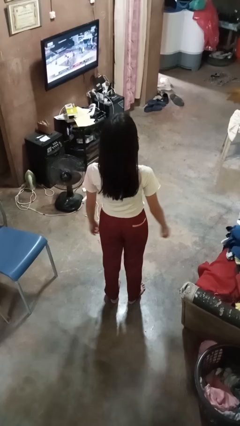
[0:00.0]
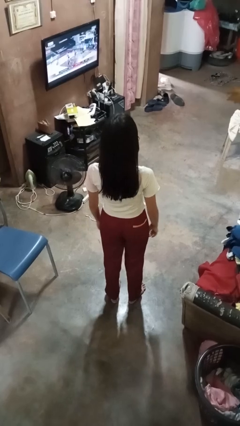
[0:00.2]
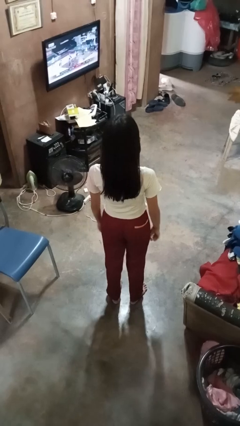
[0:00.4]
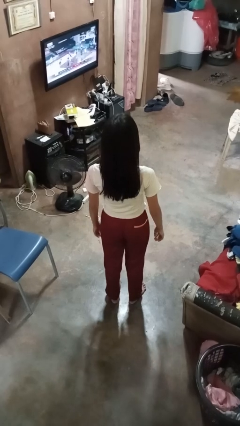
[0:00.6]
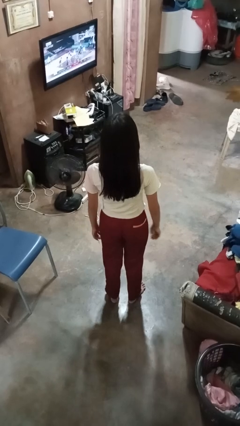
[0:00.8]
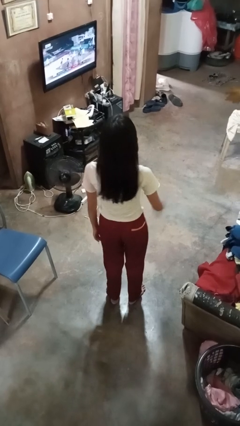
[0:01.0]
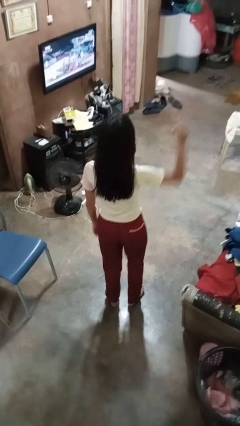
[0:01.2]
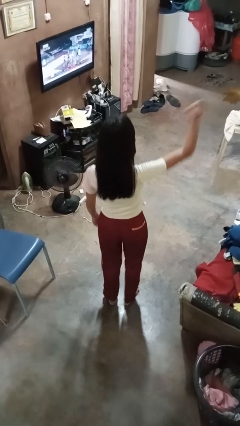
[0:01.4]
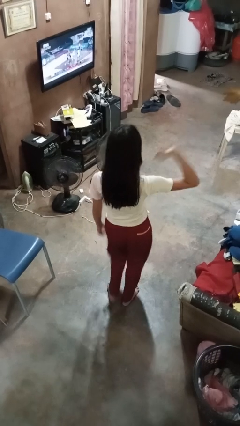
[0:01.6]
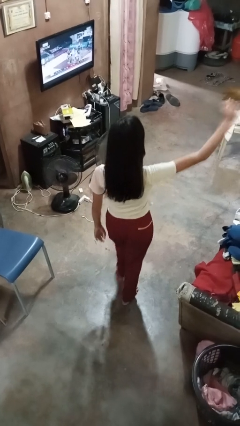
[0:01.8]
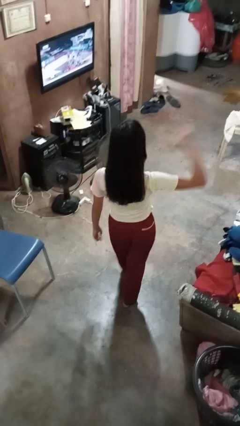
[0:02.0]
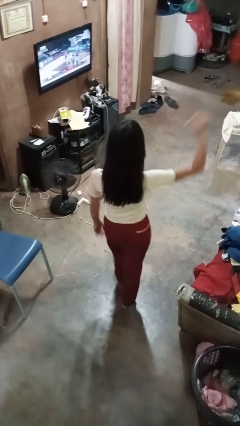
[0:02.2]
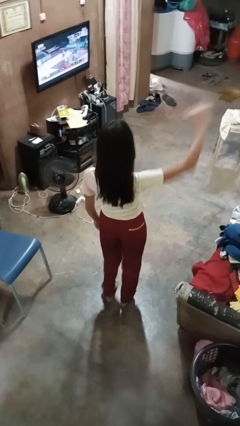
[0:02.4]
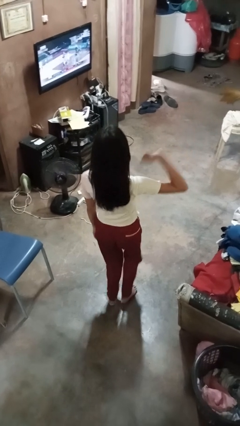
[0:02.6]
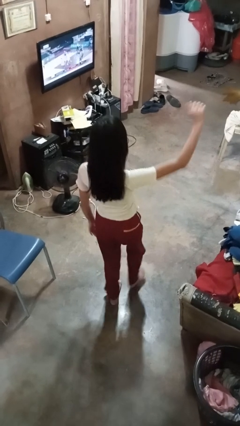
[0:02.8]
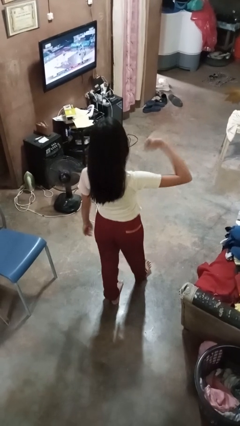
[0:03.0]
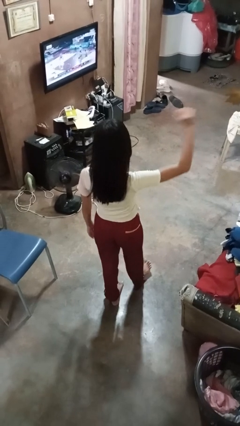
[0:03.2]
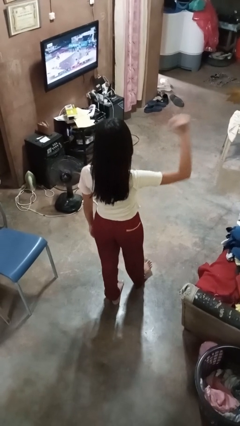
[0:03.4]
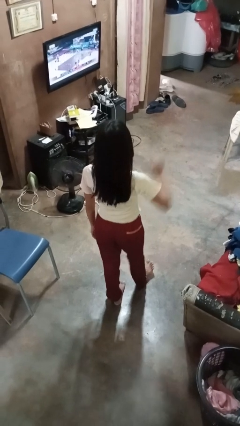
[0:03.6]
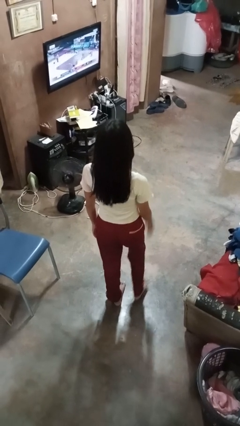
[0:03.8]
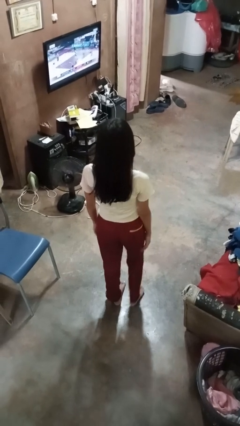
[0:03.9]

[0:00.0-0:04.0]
person dances in place

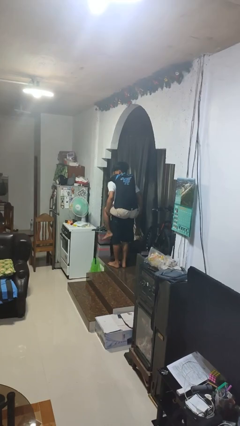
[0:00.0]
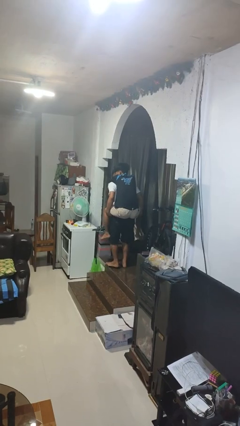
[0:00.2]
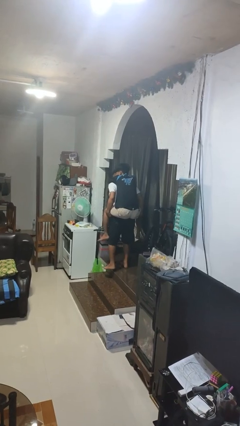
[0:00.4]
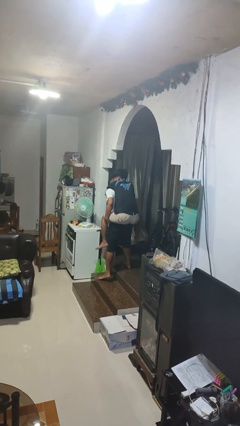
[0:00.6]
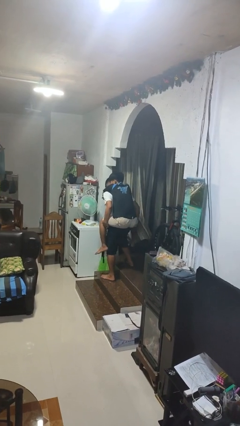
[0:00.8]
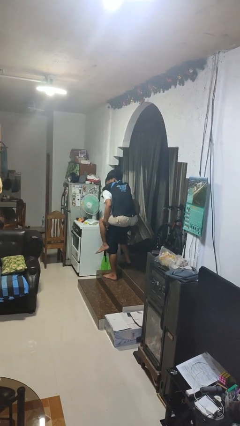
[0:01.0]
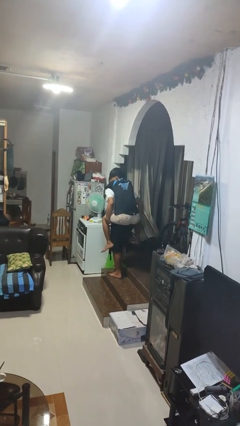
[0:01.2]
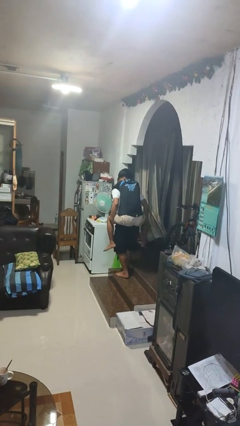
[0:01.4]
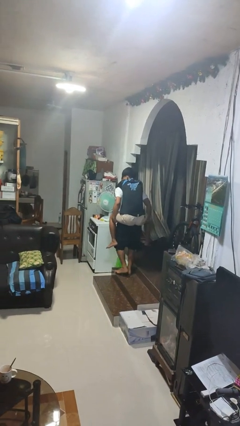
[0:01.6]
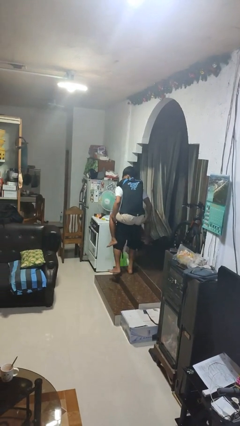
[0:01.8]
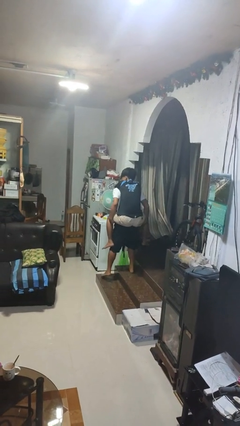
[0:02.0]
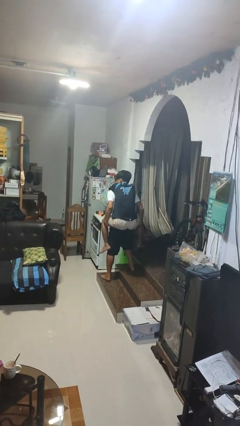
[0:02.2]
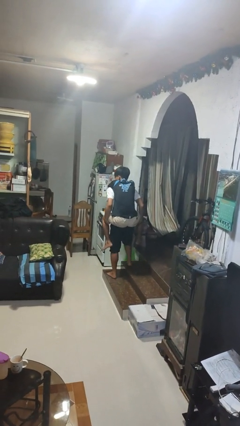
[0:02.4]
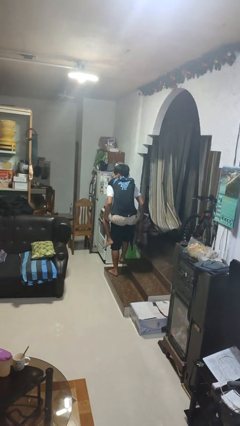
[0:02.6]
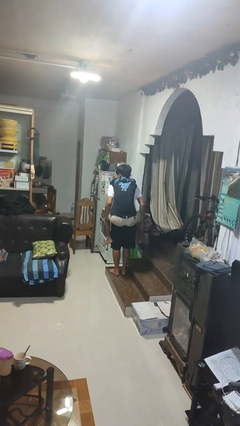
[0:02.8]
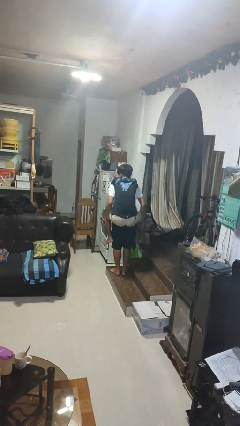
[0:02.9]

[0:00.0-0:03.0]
person carries person on back

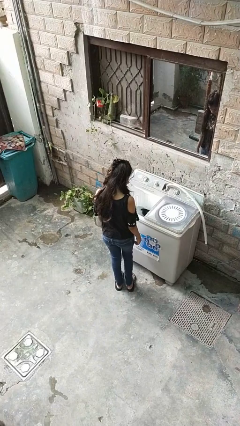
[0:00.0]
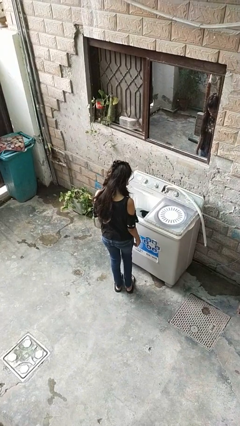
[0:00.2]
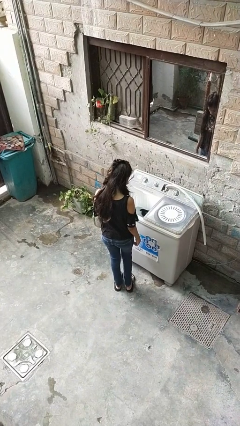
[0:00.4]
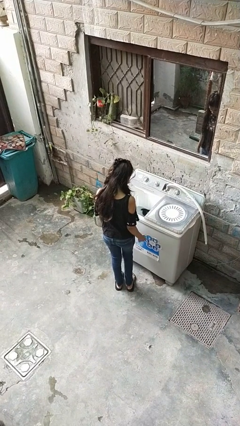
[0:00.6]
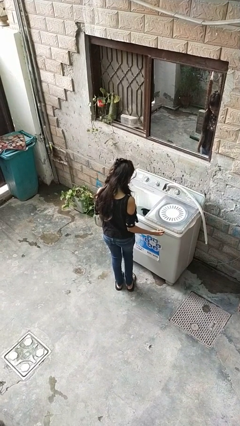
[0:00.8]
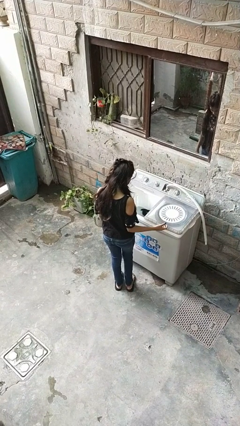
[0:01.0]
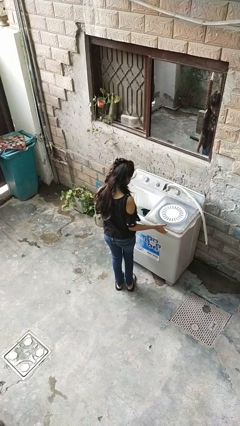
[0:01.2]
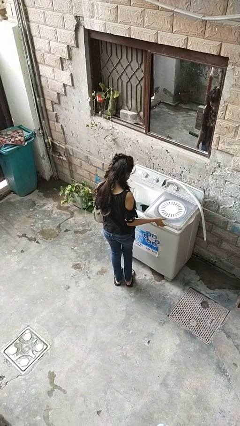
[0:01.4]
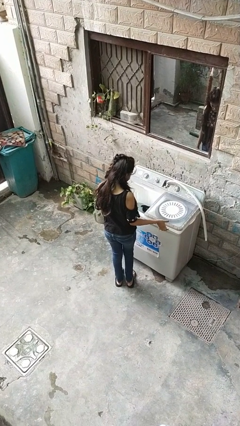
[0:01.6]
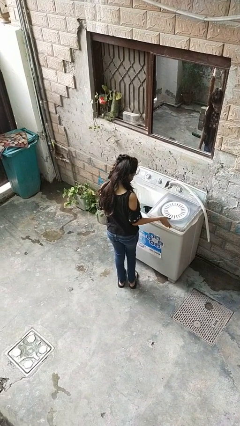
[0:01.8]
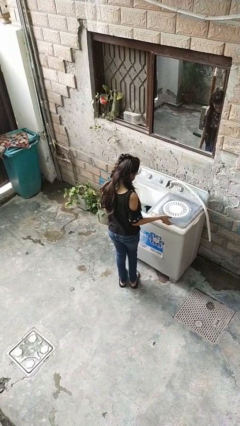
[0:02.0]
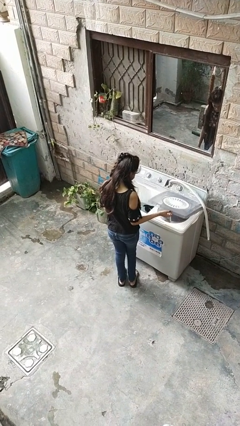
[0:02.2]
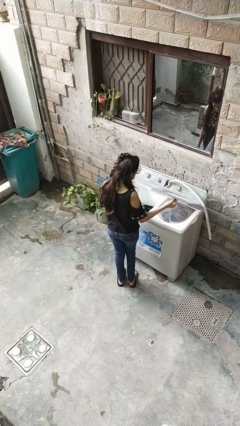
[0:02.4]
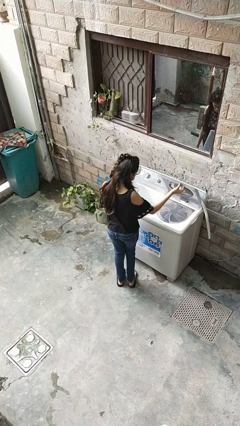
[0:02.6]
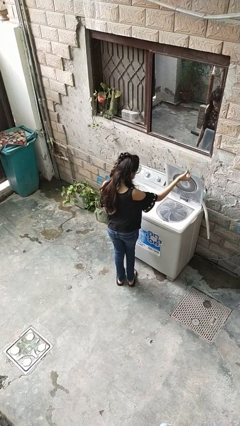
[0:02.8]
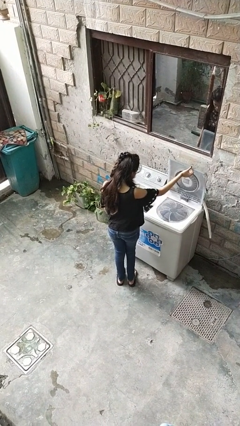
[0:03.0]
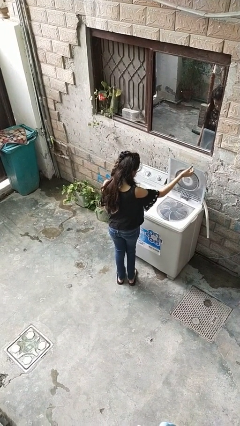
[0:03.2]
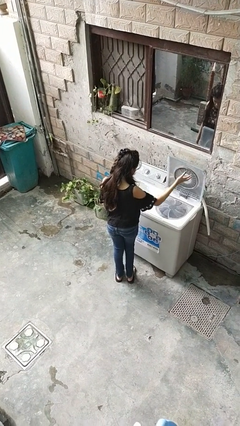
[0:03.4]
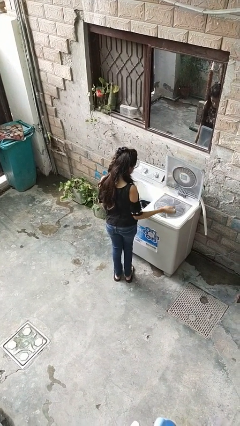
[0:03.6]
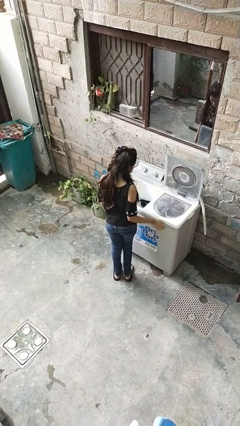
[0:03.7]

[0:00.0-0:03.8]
person opens clothes washer

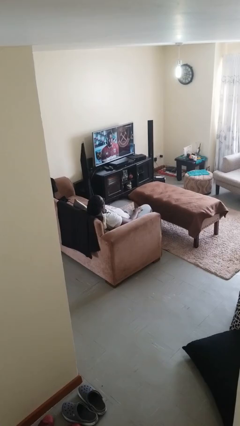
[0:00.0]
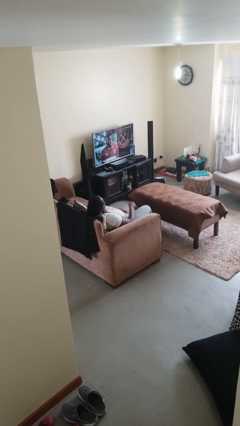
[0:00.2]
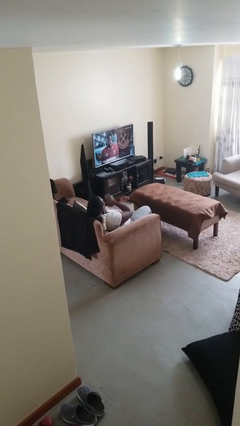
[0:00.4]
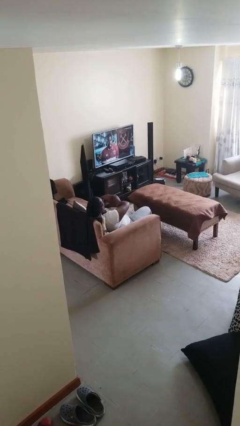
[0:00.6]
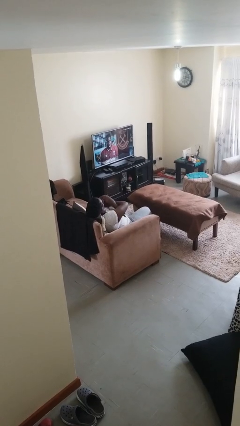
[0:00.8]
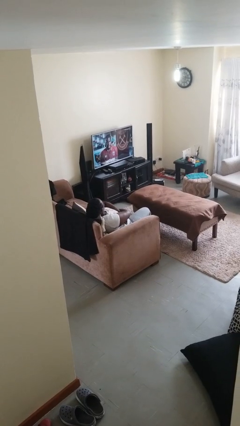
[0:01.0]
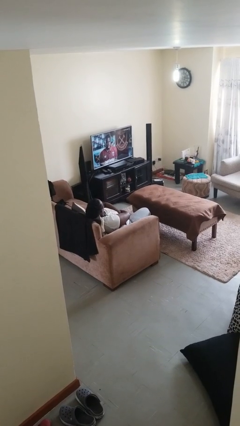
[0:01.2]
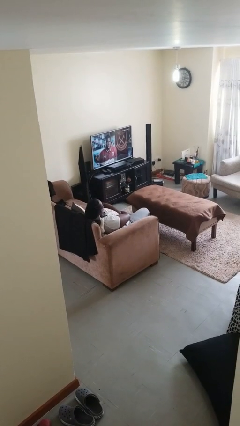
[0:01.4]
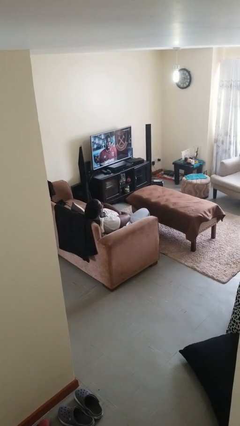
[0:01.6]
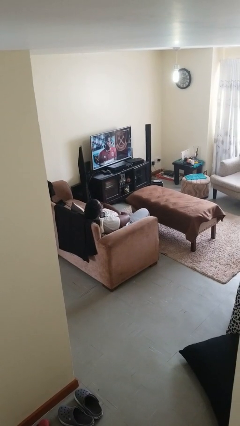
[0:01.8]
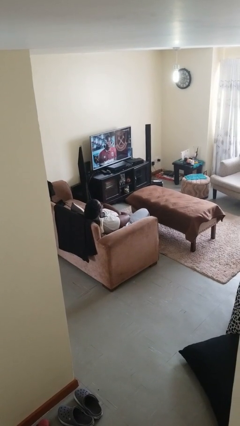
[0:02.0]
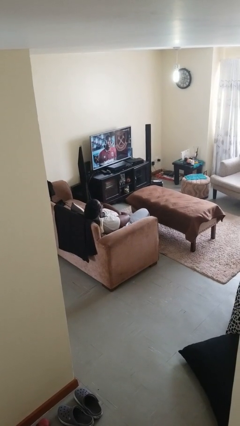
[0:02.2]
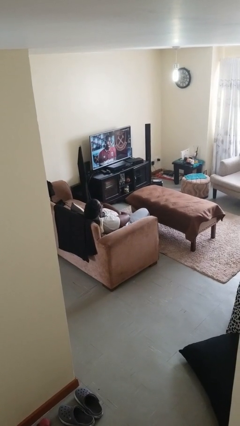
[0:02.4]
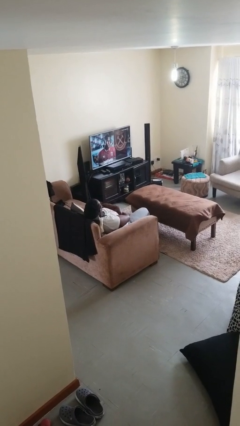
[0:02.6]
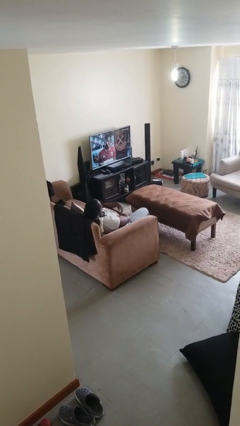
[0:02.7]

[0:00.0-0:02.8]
person crosses arms

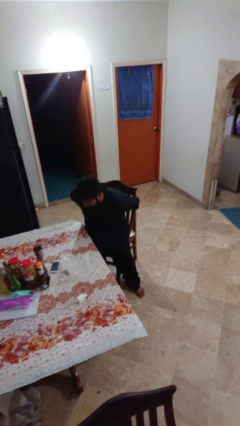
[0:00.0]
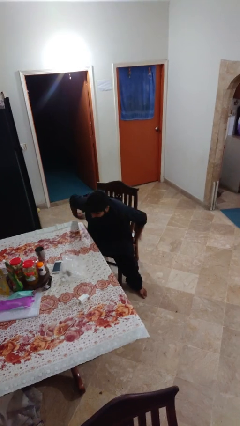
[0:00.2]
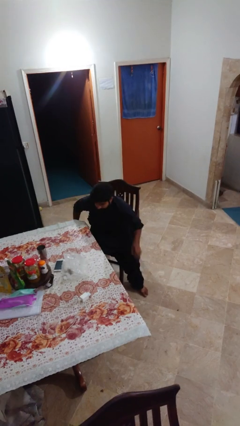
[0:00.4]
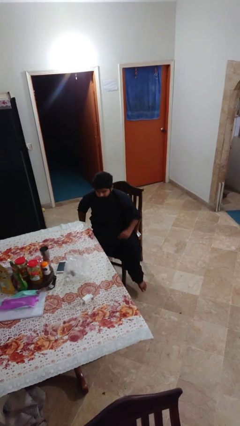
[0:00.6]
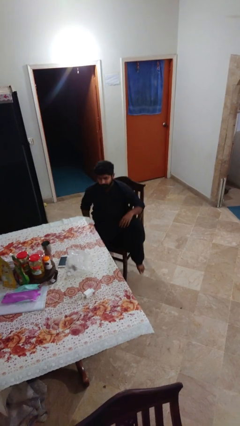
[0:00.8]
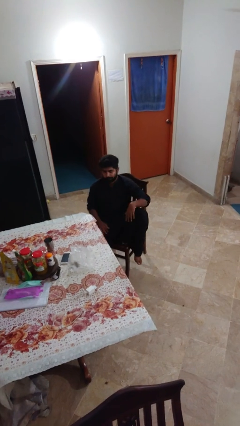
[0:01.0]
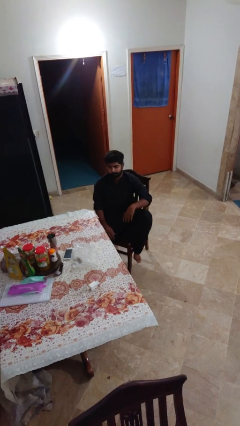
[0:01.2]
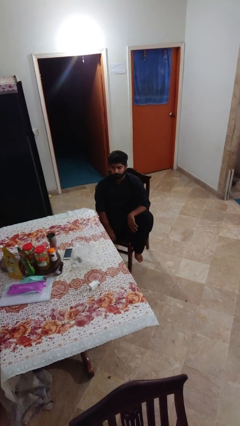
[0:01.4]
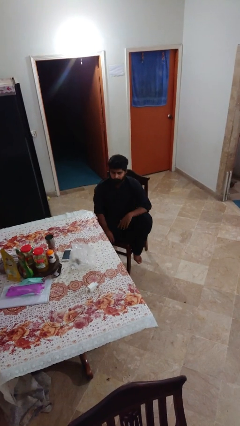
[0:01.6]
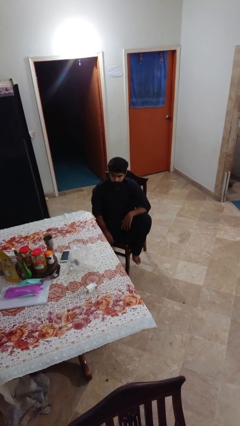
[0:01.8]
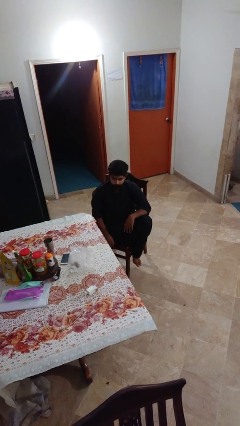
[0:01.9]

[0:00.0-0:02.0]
person sits down

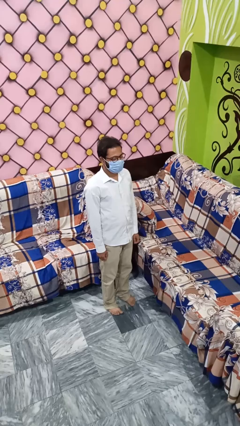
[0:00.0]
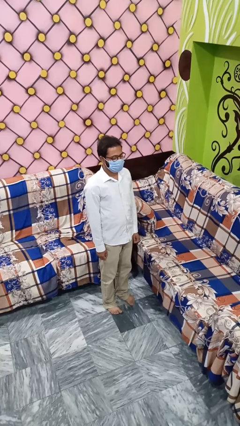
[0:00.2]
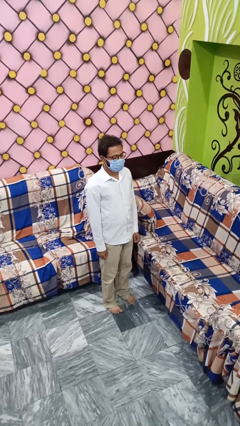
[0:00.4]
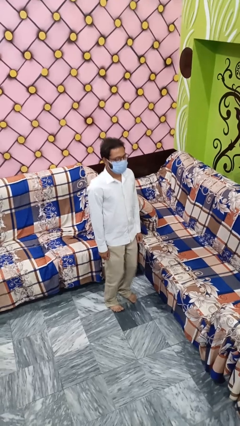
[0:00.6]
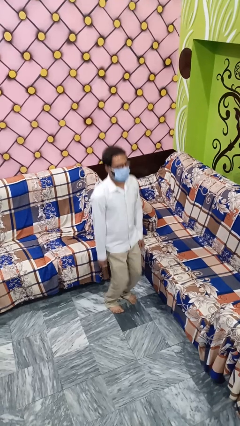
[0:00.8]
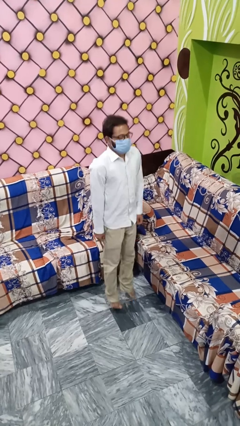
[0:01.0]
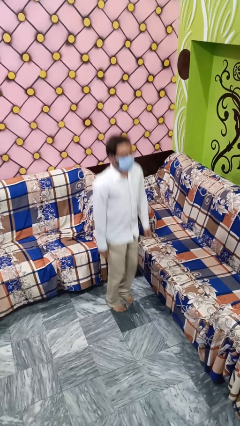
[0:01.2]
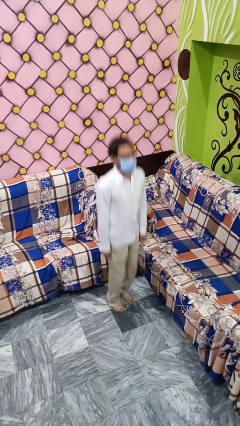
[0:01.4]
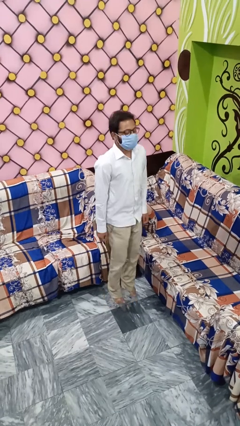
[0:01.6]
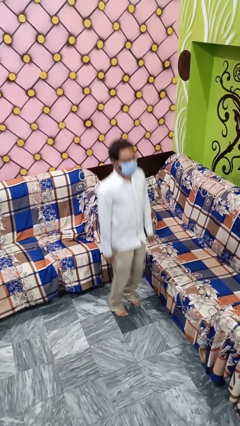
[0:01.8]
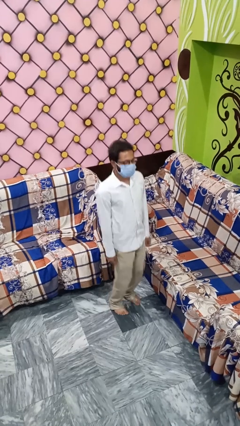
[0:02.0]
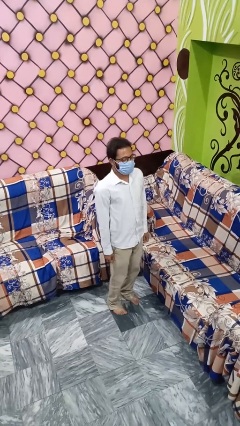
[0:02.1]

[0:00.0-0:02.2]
person jumps
